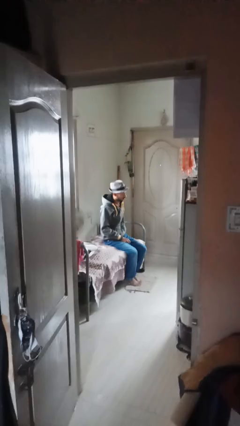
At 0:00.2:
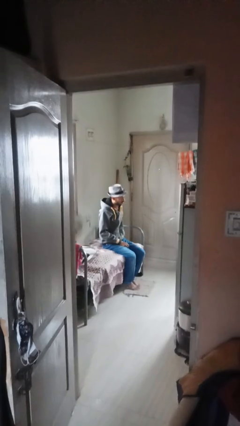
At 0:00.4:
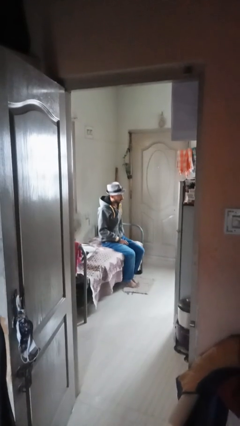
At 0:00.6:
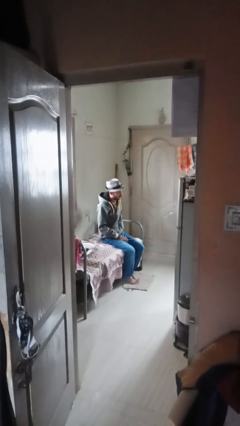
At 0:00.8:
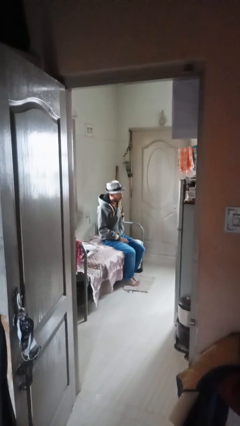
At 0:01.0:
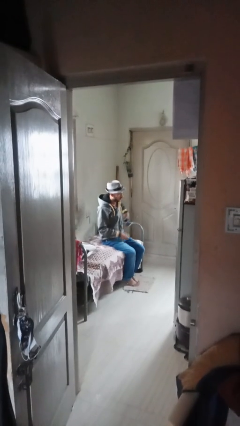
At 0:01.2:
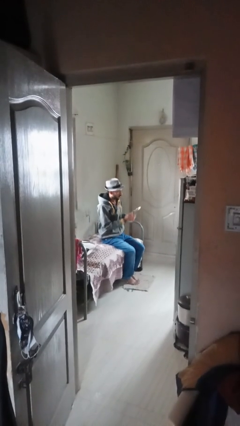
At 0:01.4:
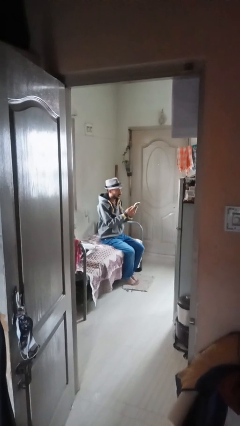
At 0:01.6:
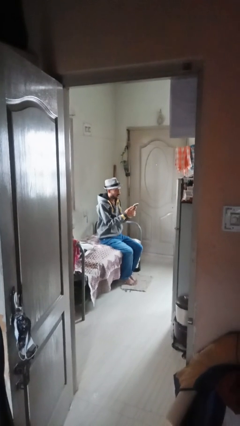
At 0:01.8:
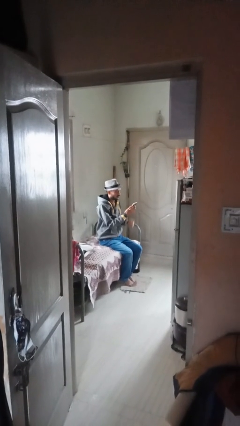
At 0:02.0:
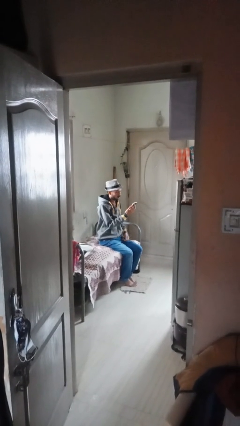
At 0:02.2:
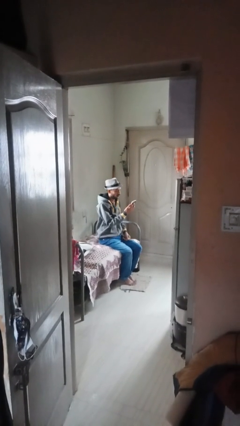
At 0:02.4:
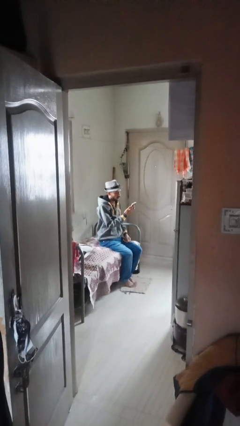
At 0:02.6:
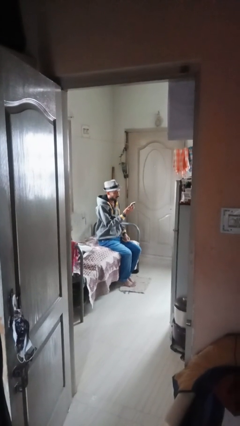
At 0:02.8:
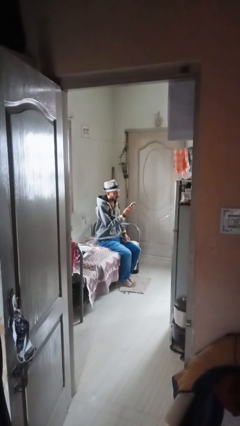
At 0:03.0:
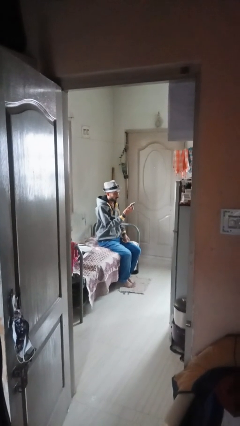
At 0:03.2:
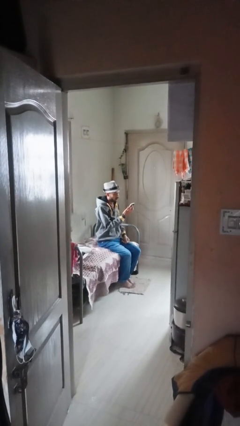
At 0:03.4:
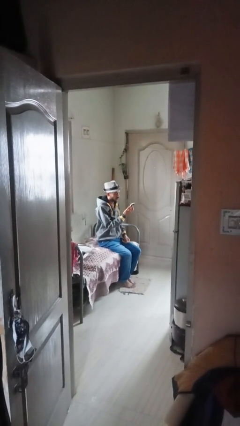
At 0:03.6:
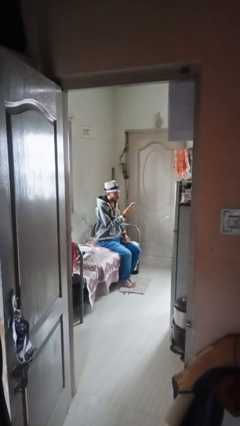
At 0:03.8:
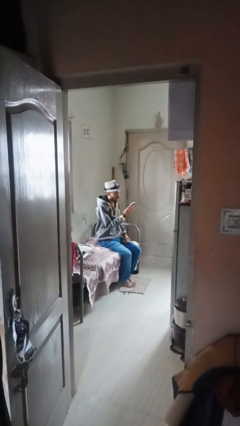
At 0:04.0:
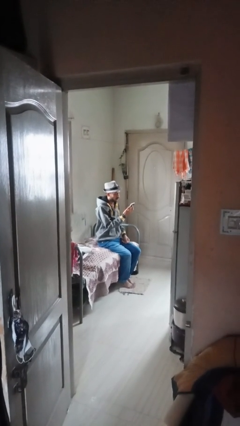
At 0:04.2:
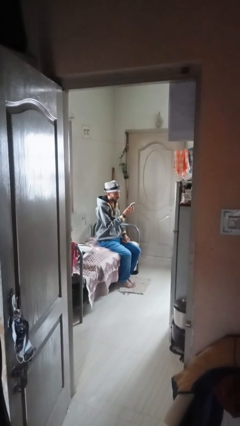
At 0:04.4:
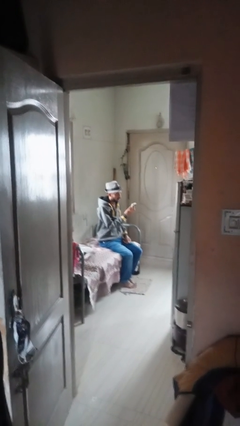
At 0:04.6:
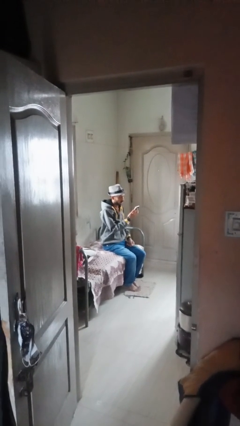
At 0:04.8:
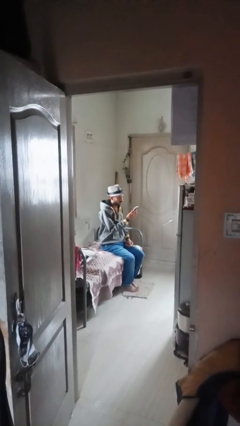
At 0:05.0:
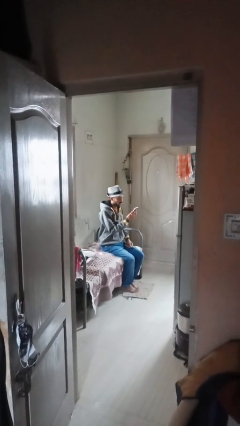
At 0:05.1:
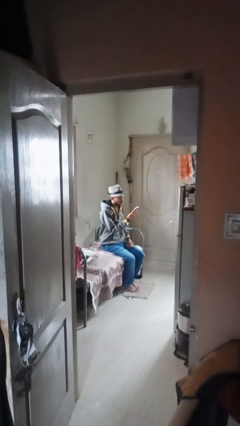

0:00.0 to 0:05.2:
person takes phone from pocket

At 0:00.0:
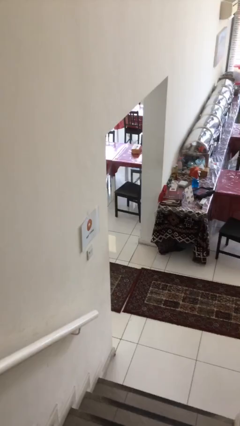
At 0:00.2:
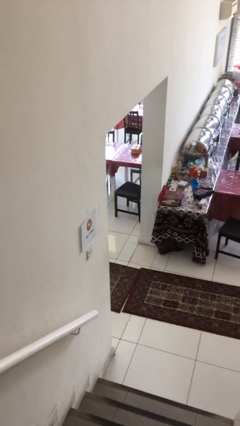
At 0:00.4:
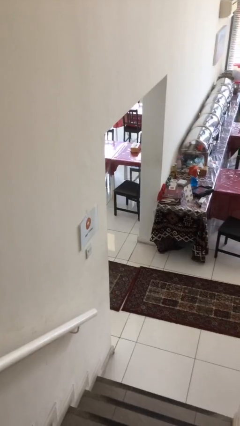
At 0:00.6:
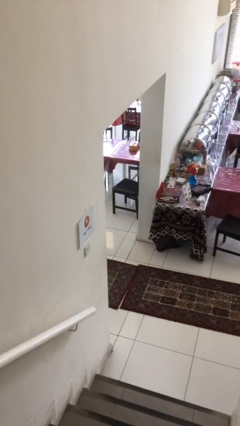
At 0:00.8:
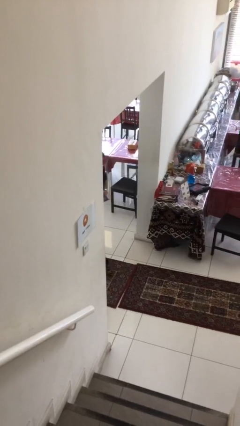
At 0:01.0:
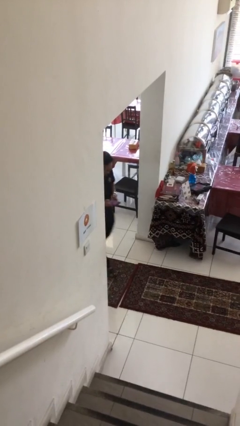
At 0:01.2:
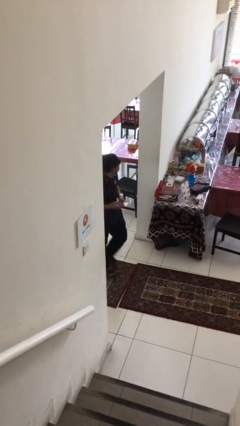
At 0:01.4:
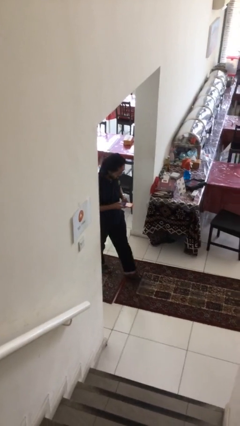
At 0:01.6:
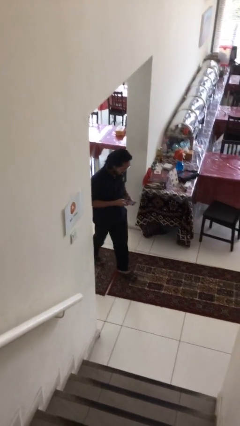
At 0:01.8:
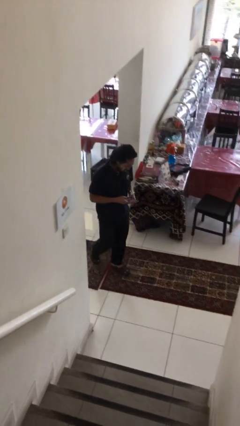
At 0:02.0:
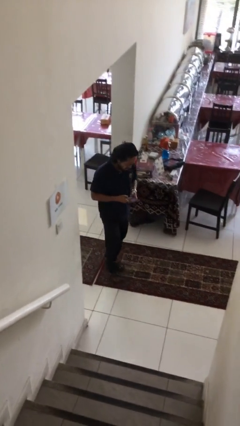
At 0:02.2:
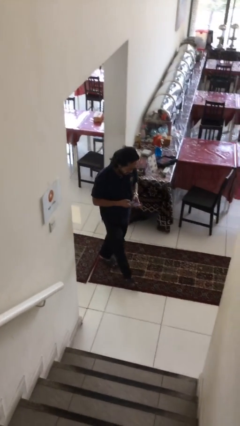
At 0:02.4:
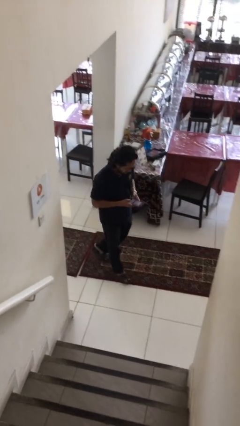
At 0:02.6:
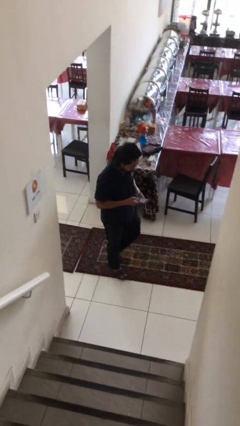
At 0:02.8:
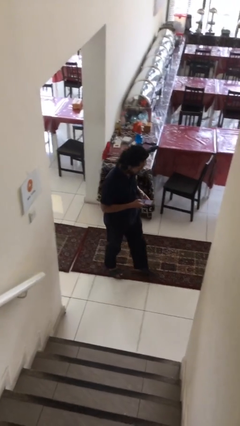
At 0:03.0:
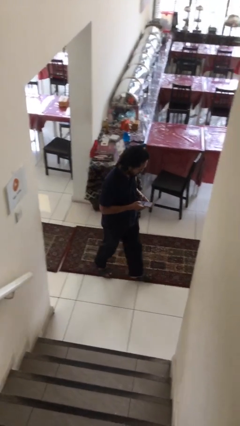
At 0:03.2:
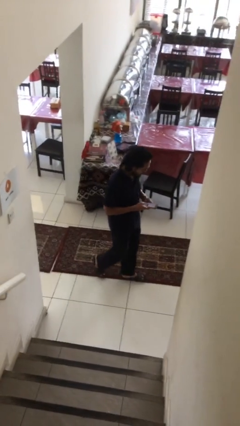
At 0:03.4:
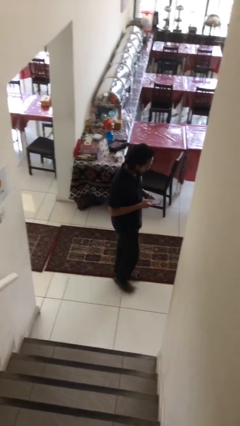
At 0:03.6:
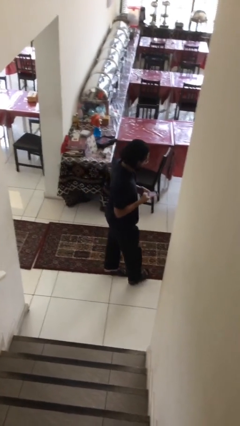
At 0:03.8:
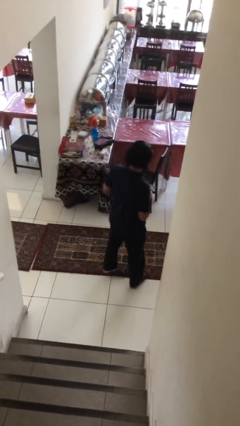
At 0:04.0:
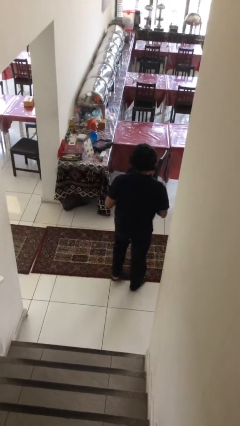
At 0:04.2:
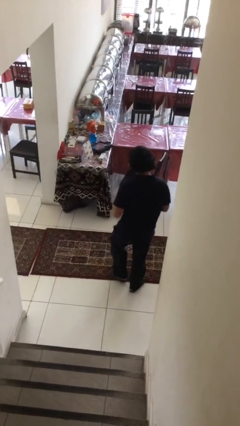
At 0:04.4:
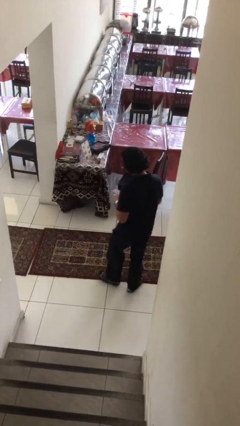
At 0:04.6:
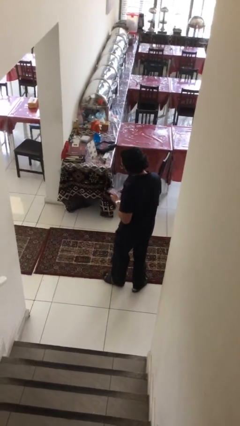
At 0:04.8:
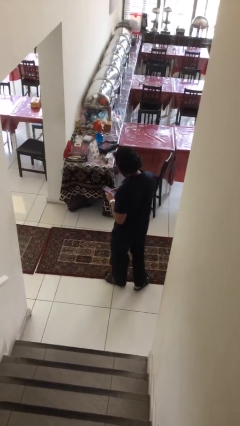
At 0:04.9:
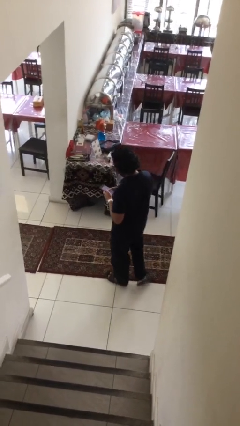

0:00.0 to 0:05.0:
person enters scene through structure

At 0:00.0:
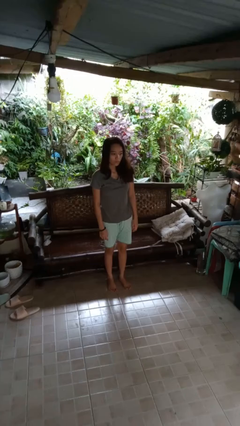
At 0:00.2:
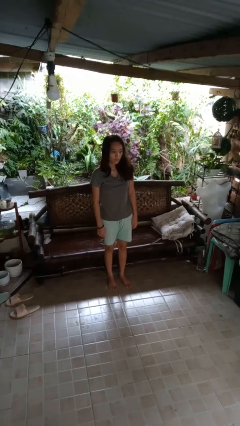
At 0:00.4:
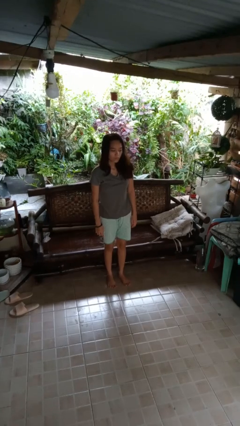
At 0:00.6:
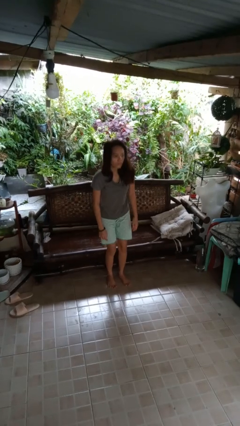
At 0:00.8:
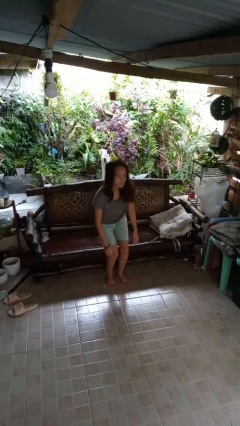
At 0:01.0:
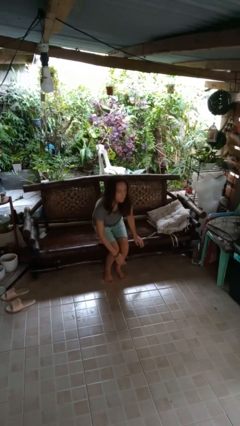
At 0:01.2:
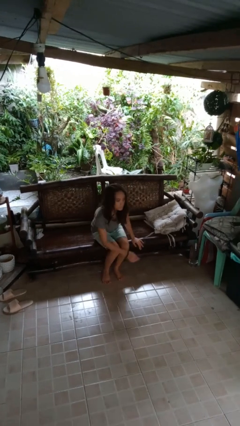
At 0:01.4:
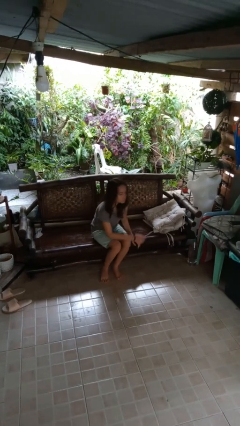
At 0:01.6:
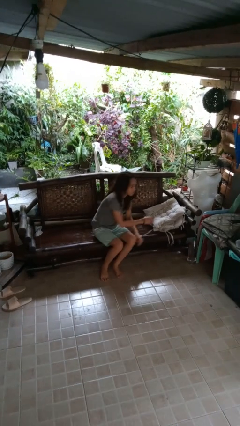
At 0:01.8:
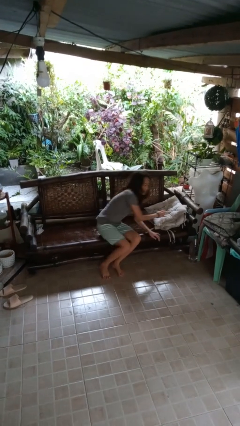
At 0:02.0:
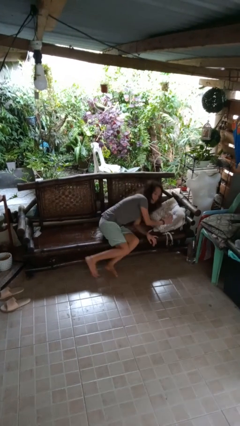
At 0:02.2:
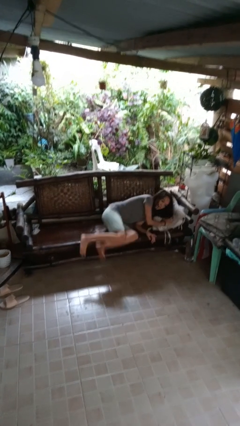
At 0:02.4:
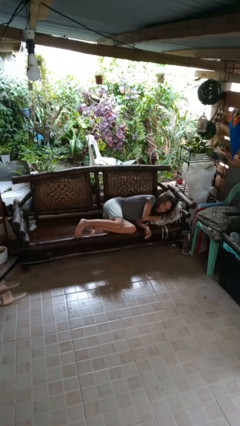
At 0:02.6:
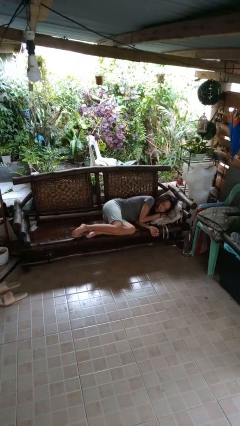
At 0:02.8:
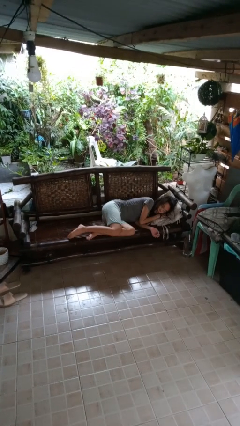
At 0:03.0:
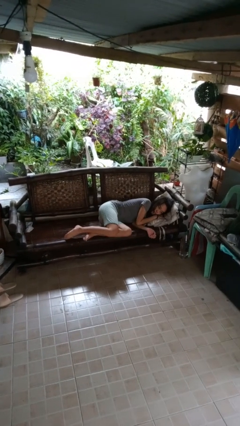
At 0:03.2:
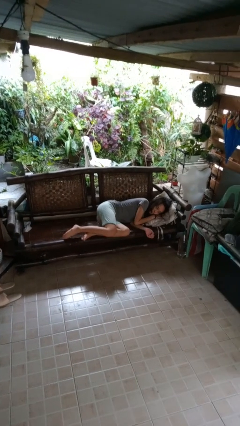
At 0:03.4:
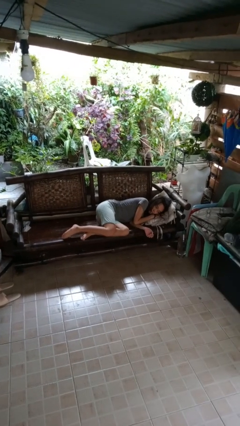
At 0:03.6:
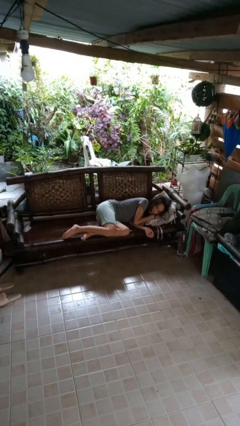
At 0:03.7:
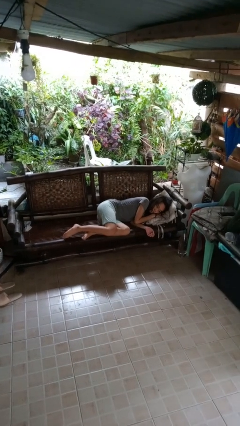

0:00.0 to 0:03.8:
person lies down on couch

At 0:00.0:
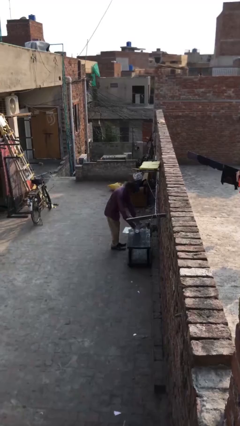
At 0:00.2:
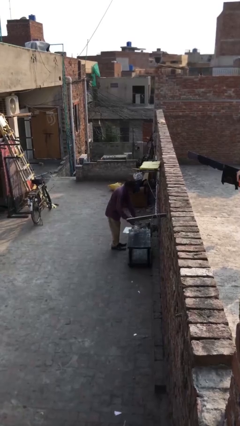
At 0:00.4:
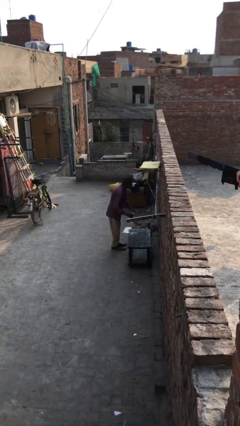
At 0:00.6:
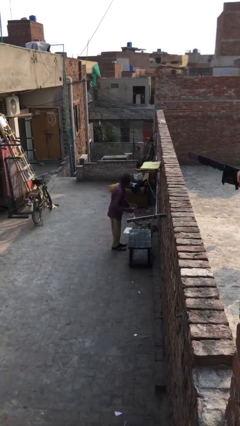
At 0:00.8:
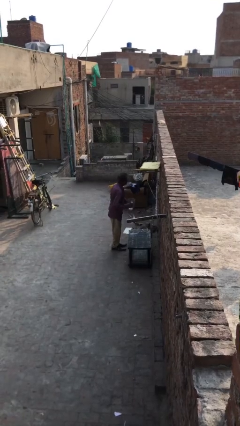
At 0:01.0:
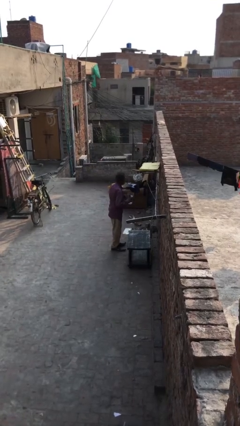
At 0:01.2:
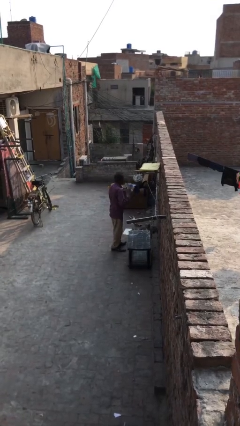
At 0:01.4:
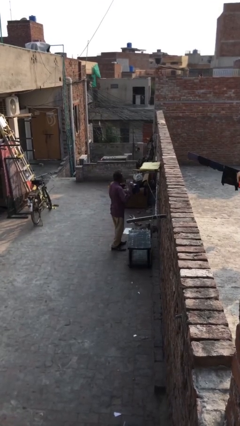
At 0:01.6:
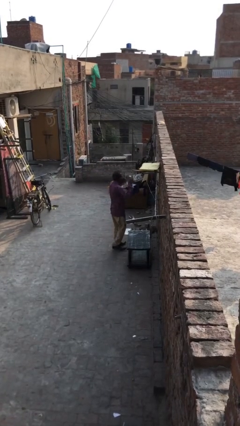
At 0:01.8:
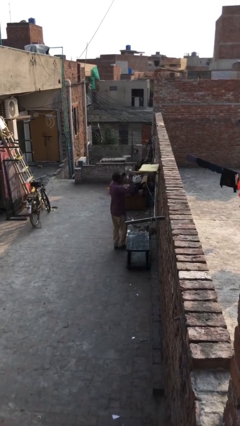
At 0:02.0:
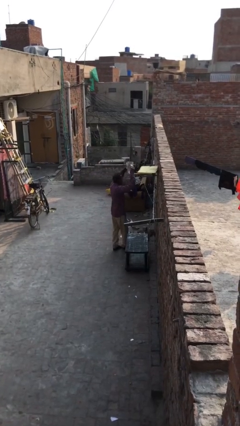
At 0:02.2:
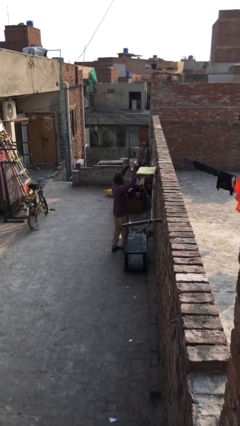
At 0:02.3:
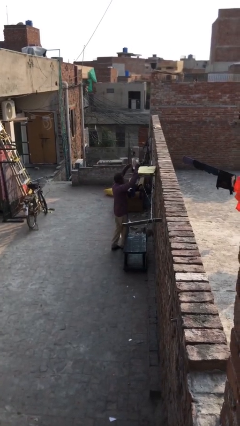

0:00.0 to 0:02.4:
person picks up object from table

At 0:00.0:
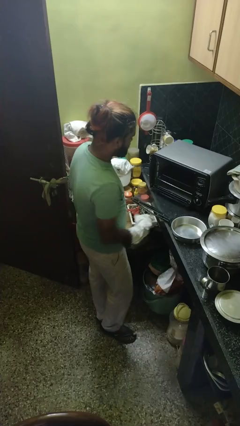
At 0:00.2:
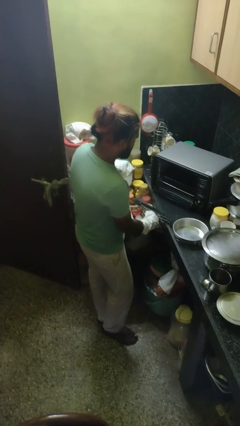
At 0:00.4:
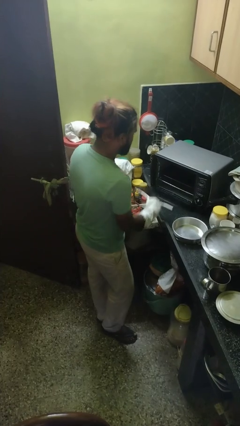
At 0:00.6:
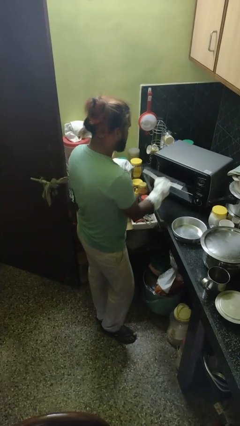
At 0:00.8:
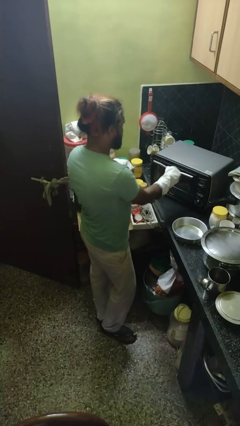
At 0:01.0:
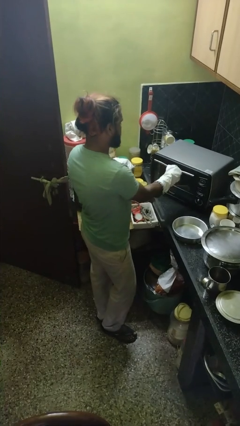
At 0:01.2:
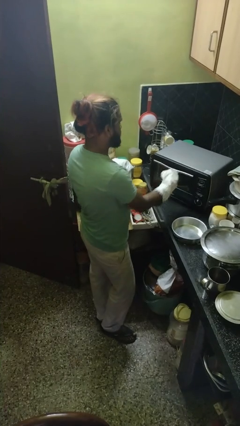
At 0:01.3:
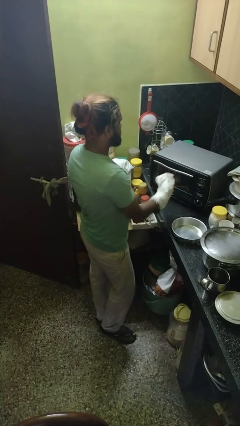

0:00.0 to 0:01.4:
person closes oven door
